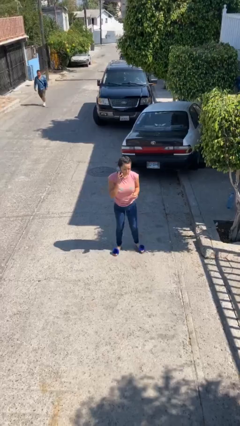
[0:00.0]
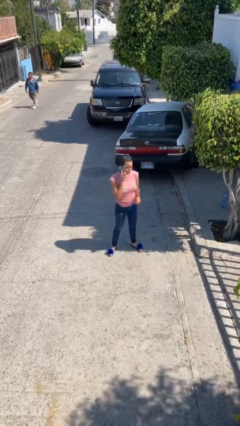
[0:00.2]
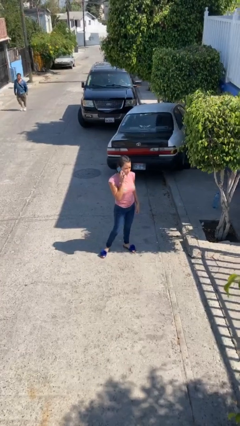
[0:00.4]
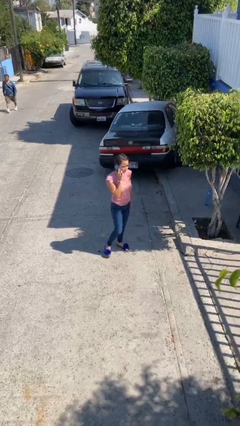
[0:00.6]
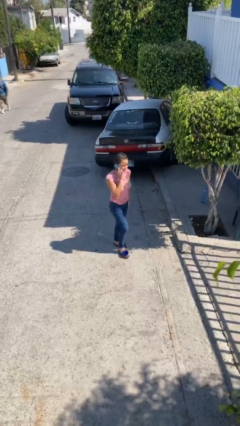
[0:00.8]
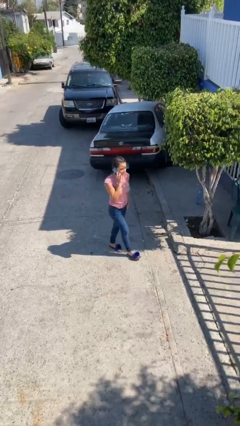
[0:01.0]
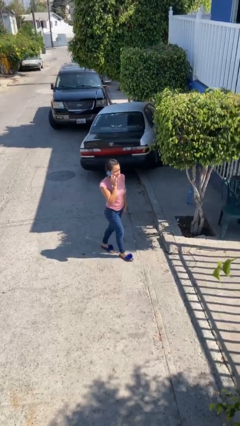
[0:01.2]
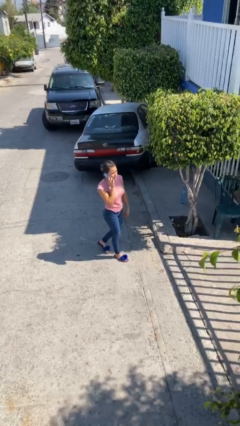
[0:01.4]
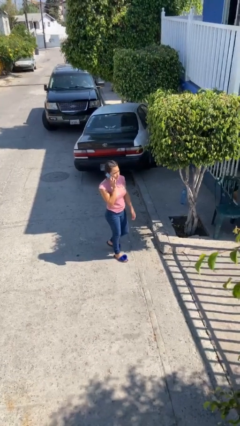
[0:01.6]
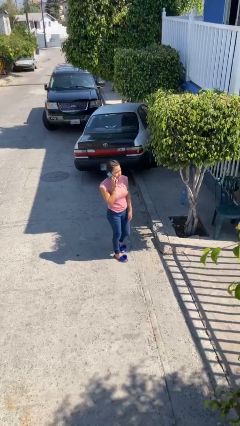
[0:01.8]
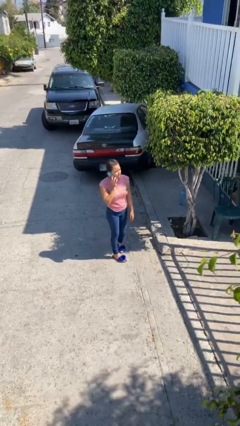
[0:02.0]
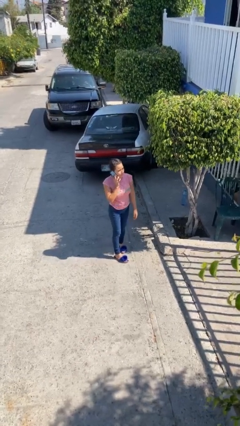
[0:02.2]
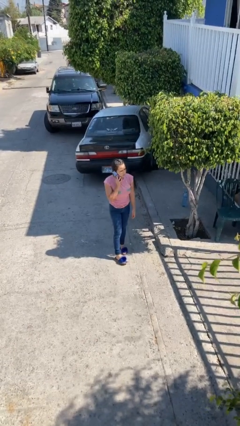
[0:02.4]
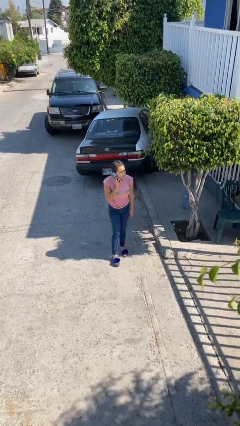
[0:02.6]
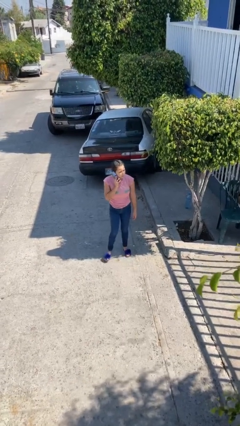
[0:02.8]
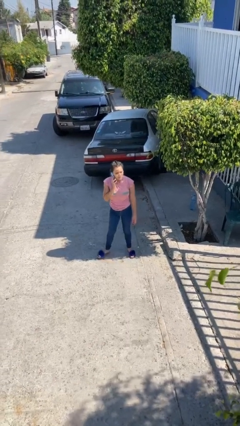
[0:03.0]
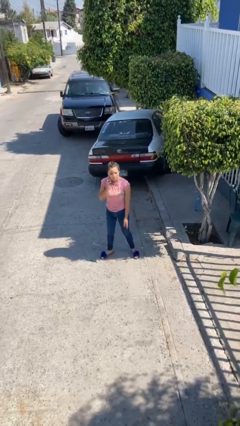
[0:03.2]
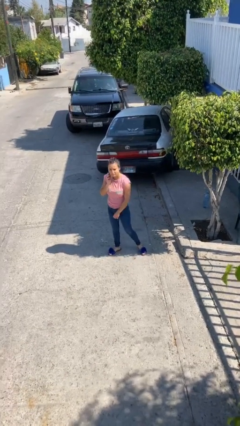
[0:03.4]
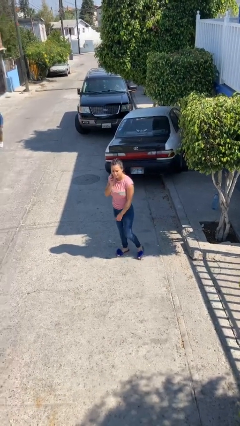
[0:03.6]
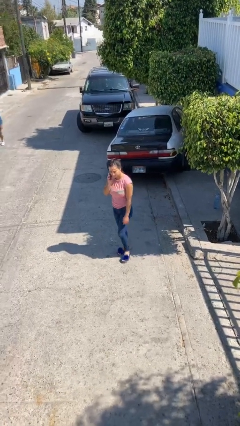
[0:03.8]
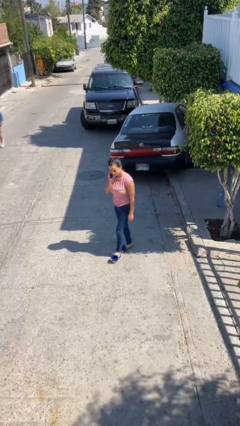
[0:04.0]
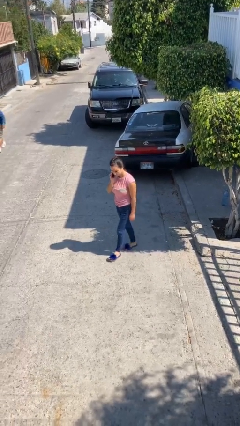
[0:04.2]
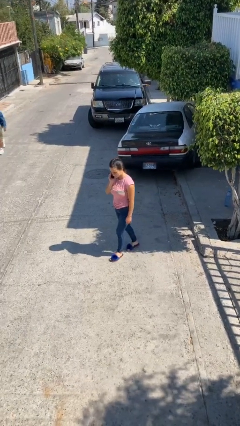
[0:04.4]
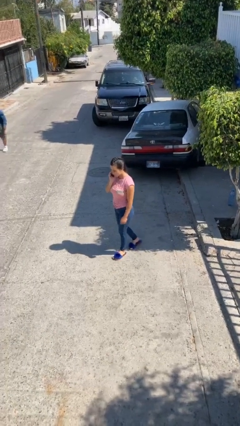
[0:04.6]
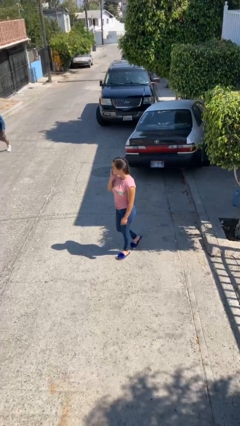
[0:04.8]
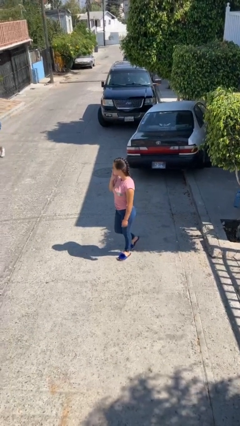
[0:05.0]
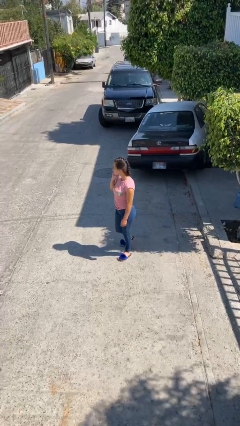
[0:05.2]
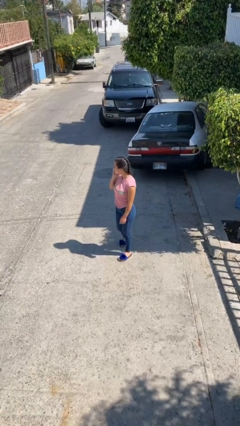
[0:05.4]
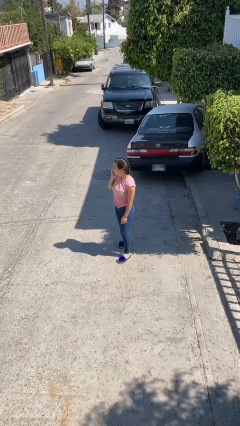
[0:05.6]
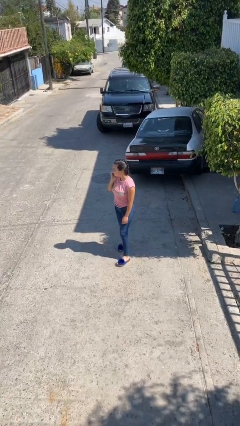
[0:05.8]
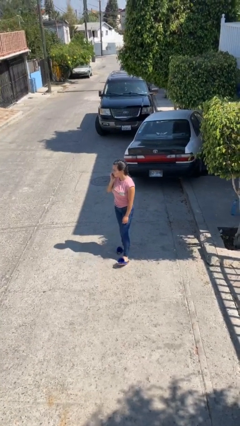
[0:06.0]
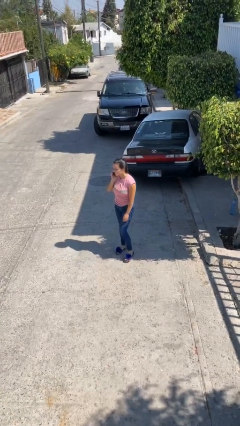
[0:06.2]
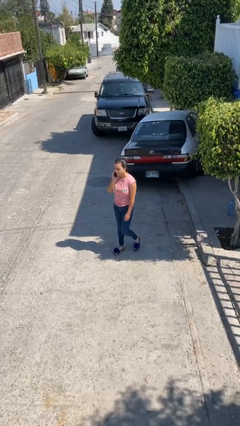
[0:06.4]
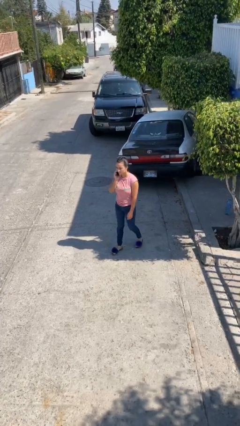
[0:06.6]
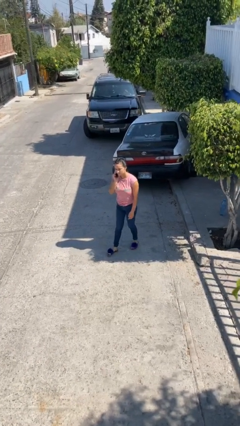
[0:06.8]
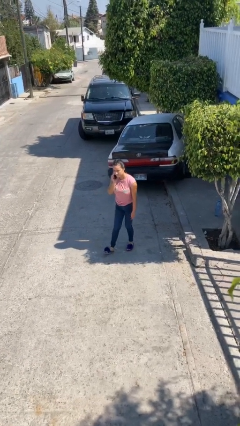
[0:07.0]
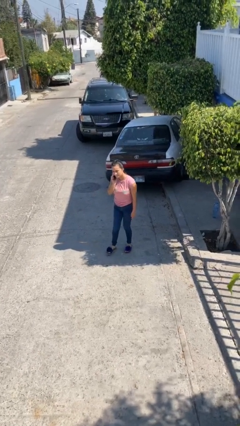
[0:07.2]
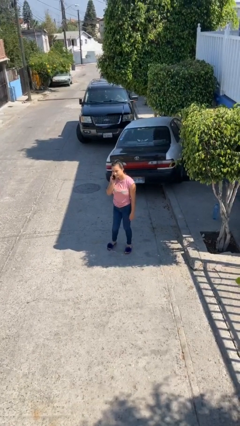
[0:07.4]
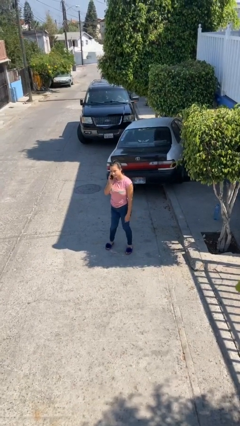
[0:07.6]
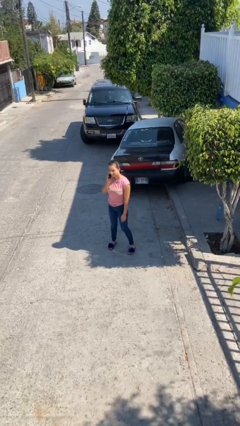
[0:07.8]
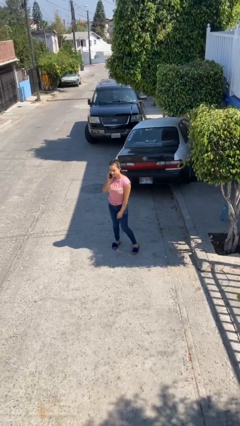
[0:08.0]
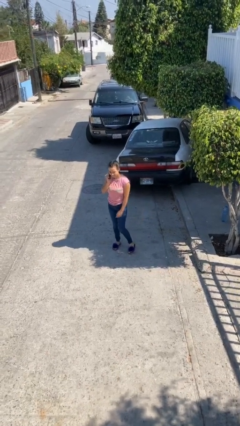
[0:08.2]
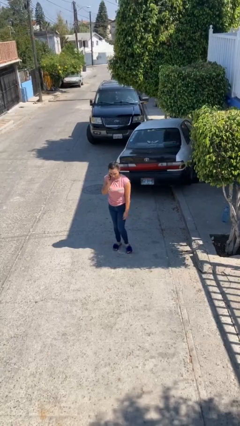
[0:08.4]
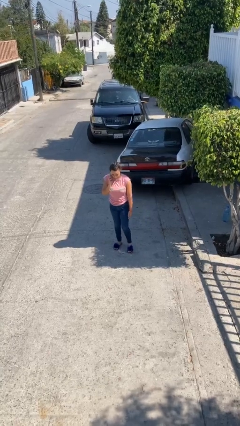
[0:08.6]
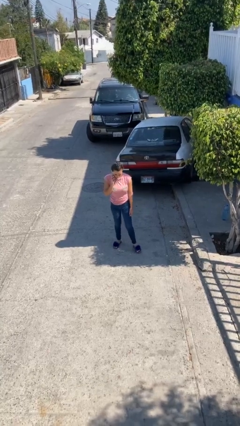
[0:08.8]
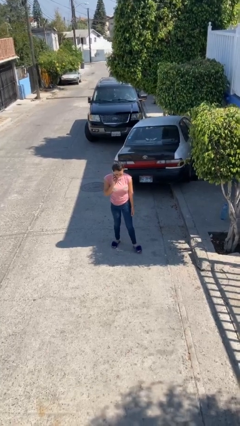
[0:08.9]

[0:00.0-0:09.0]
person talks on phone

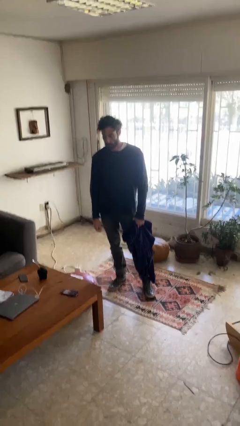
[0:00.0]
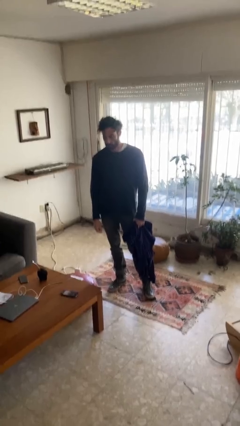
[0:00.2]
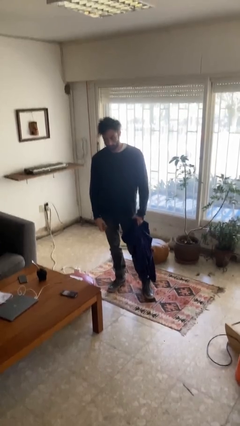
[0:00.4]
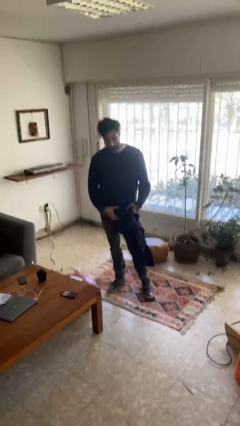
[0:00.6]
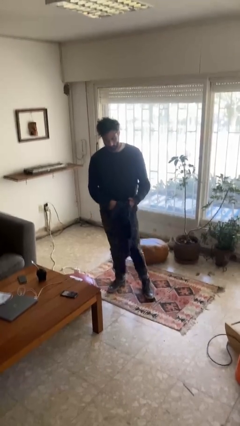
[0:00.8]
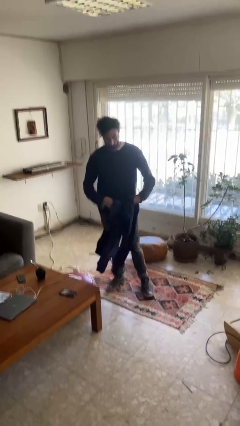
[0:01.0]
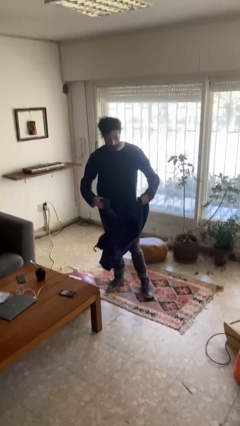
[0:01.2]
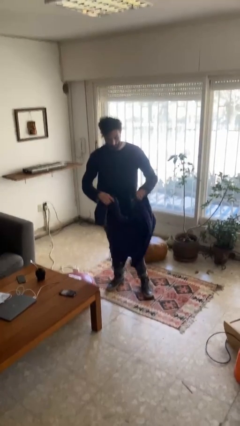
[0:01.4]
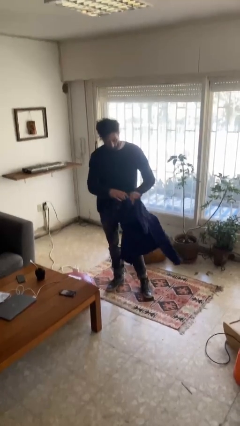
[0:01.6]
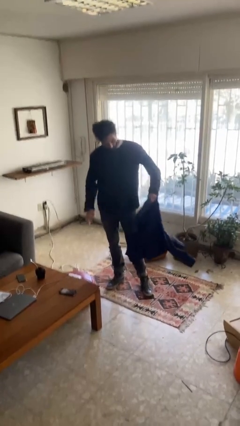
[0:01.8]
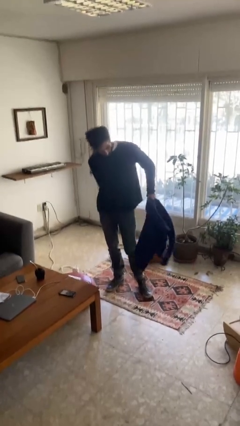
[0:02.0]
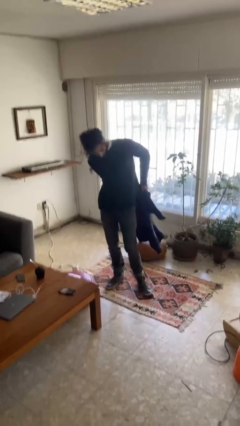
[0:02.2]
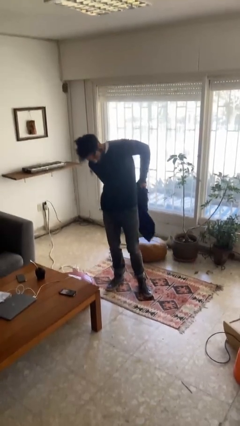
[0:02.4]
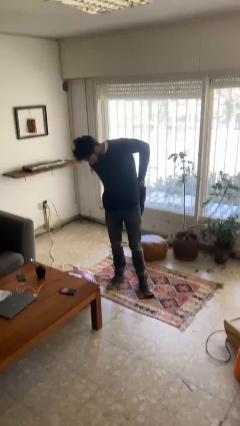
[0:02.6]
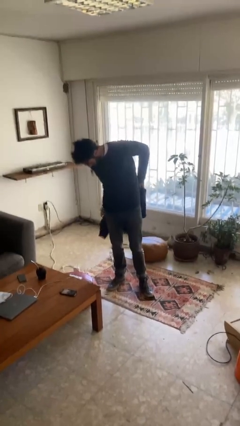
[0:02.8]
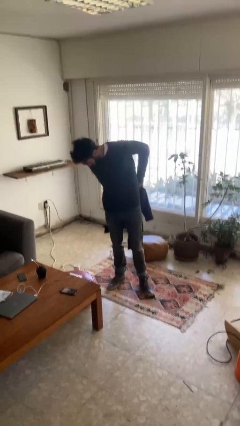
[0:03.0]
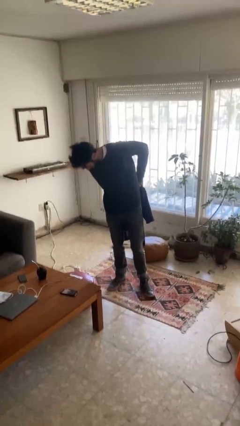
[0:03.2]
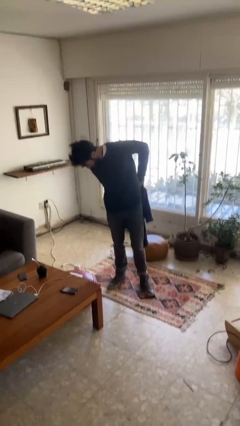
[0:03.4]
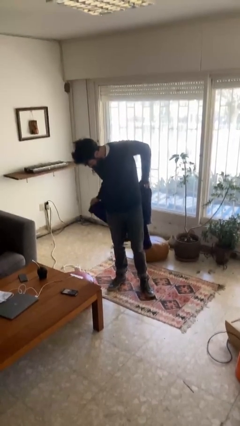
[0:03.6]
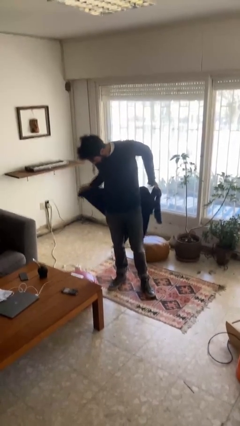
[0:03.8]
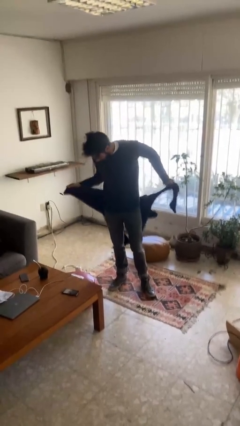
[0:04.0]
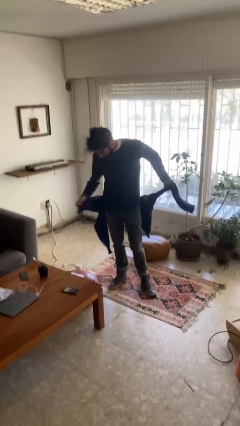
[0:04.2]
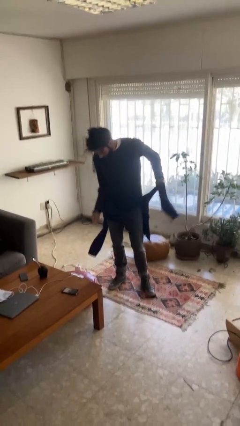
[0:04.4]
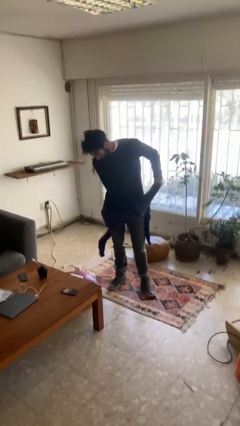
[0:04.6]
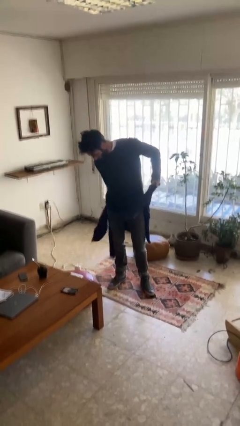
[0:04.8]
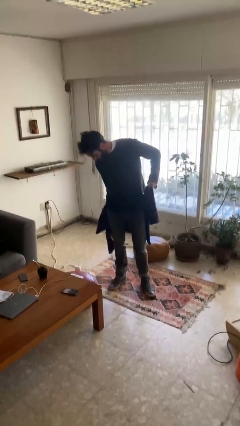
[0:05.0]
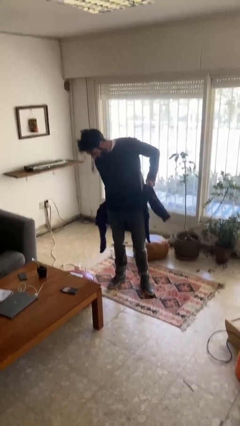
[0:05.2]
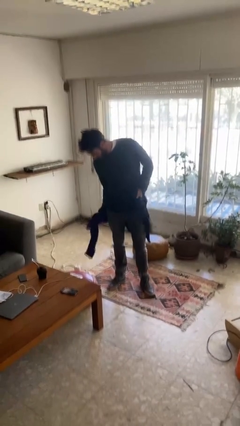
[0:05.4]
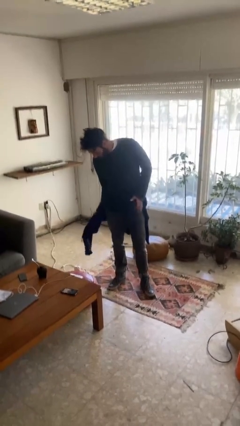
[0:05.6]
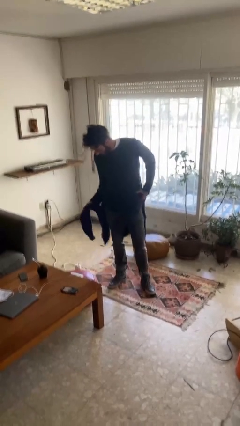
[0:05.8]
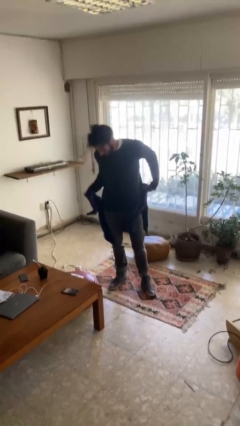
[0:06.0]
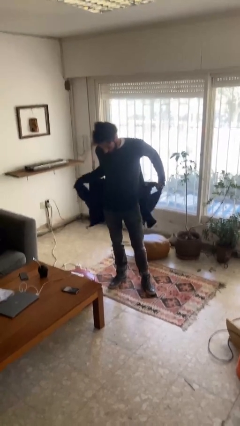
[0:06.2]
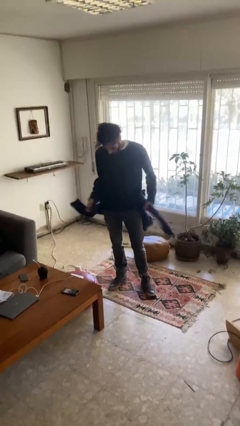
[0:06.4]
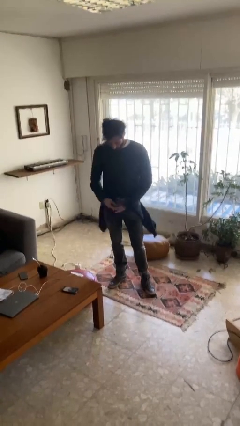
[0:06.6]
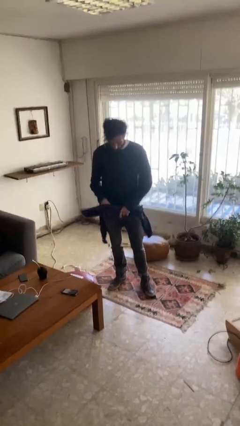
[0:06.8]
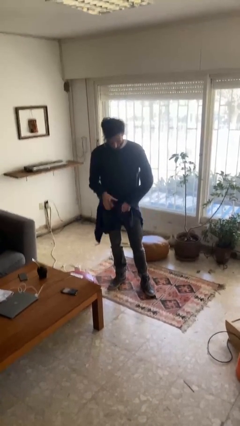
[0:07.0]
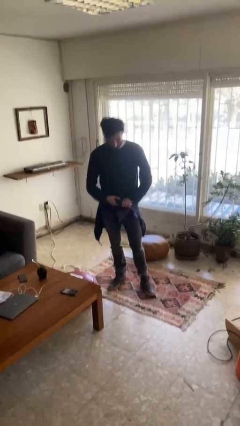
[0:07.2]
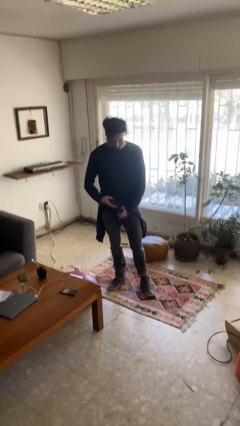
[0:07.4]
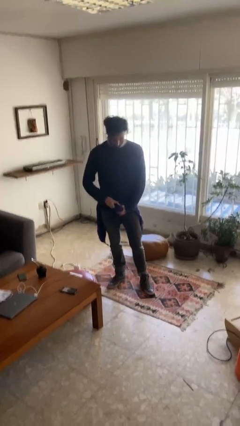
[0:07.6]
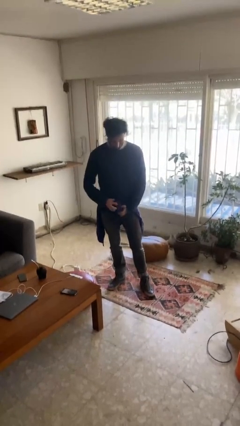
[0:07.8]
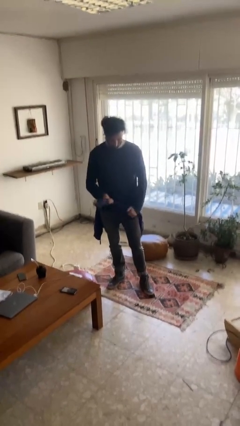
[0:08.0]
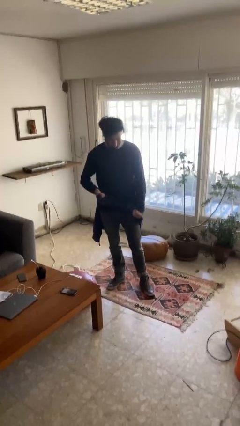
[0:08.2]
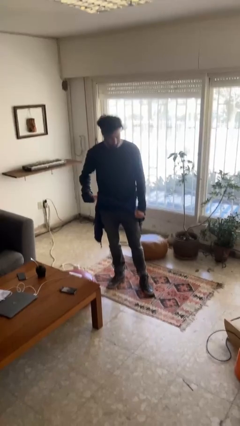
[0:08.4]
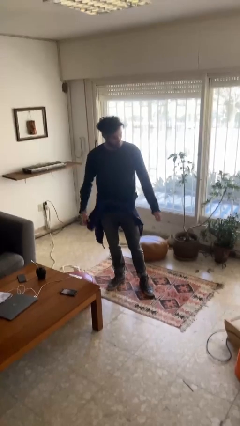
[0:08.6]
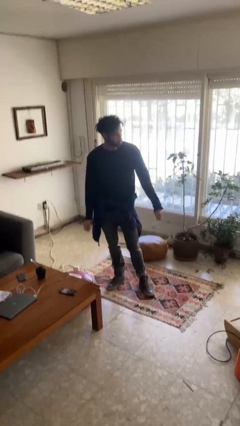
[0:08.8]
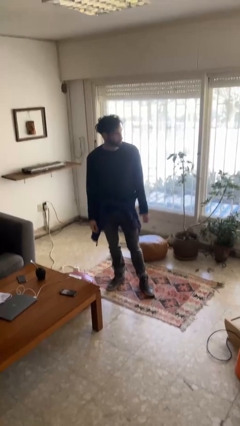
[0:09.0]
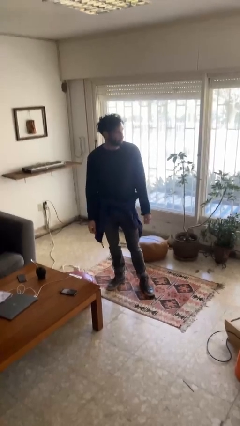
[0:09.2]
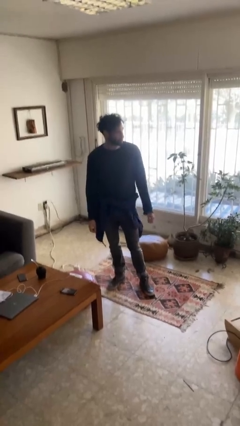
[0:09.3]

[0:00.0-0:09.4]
person ties jacket around waist
